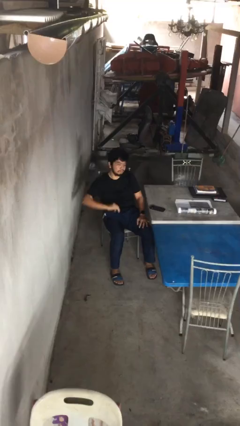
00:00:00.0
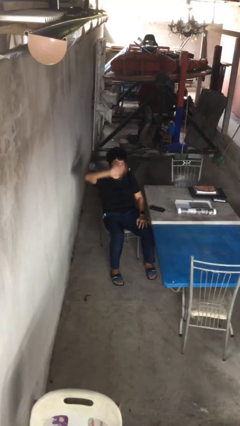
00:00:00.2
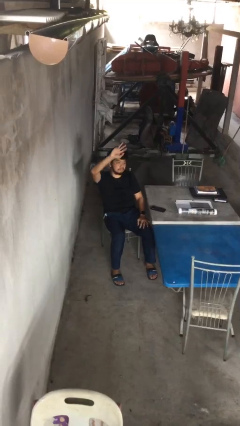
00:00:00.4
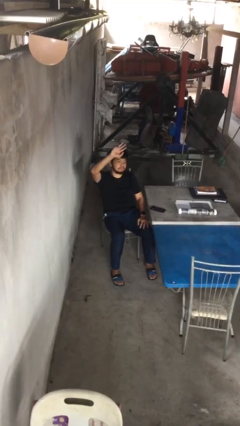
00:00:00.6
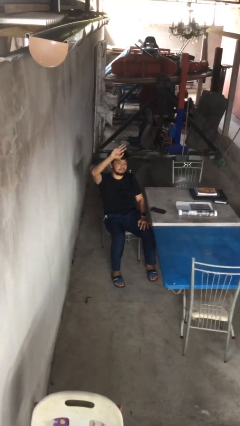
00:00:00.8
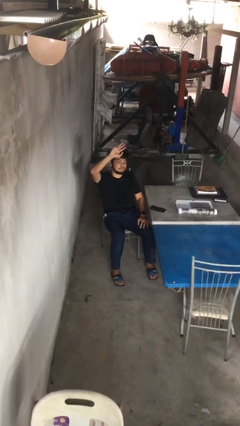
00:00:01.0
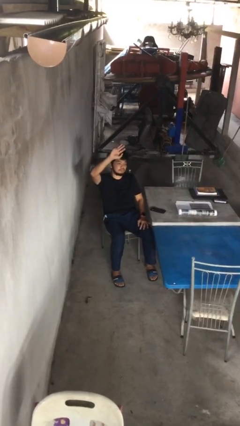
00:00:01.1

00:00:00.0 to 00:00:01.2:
person gestures swipe up

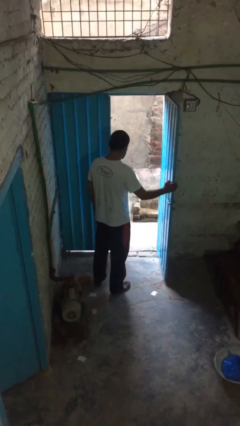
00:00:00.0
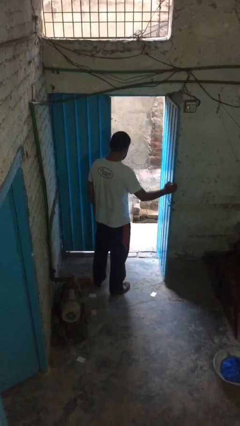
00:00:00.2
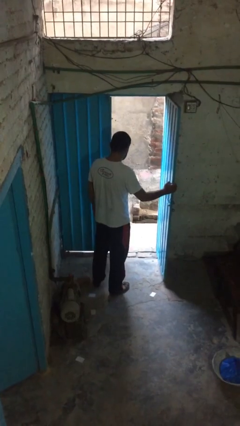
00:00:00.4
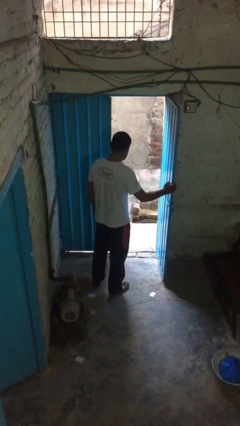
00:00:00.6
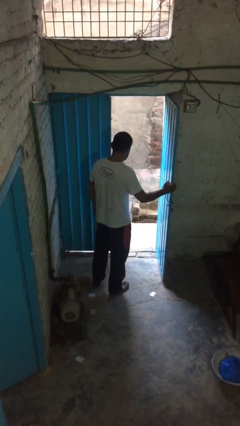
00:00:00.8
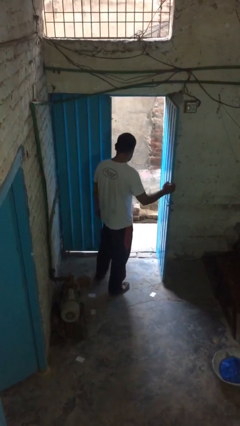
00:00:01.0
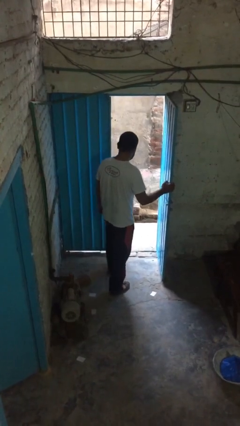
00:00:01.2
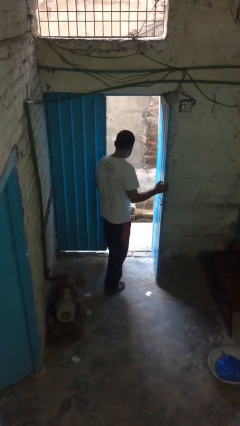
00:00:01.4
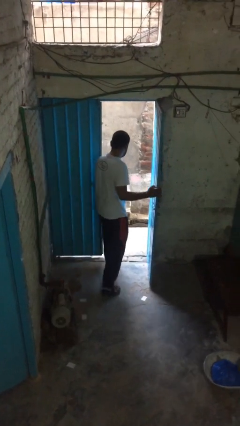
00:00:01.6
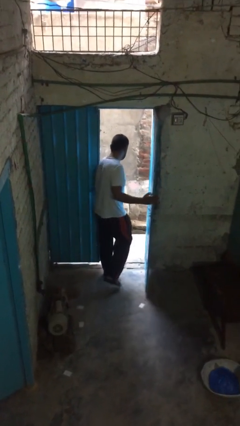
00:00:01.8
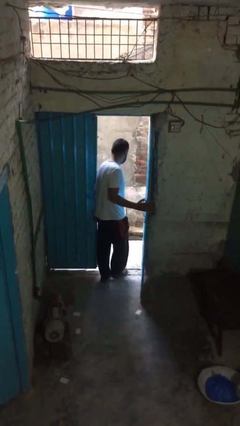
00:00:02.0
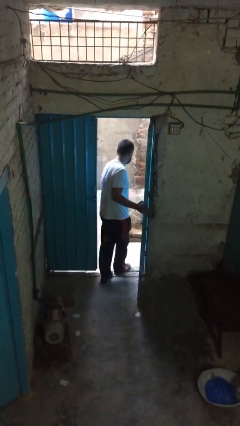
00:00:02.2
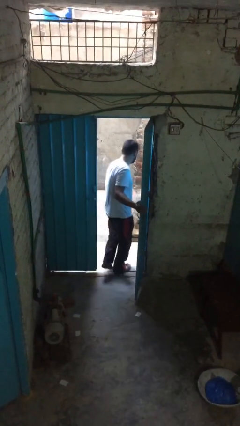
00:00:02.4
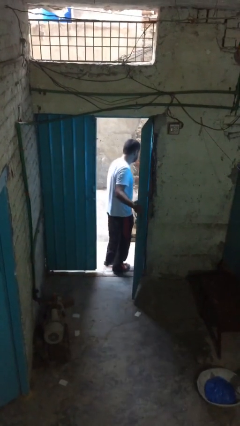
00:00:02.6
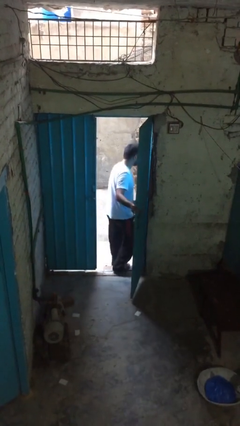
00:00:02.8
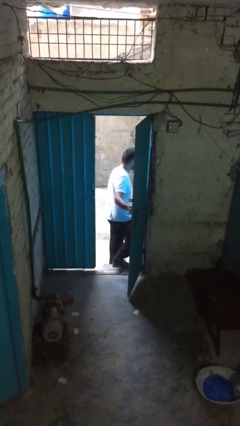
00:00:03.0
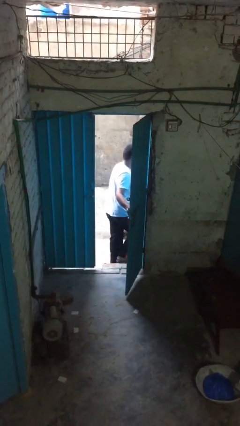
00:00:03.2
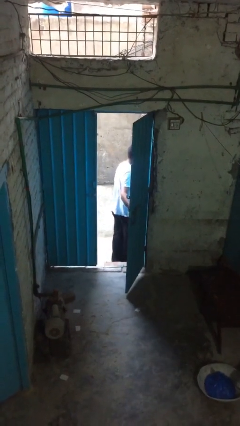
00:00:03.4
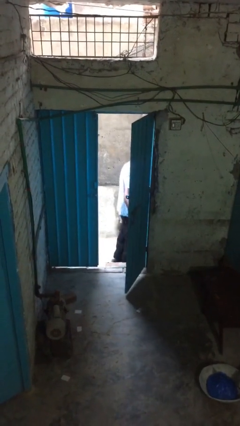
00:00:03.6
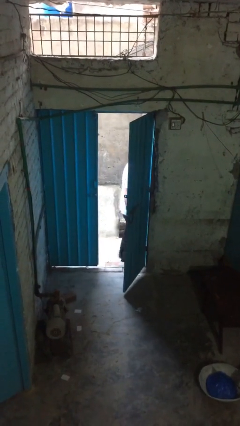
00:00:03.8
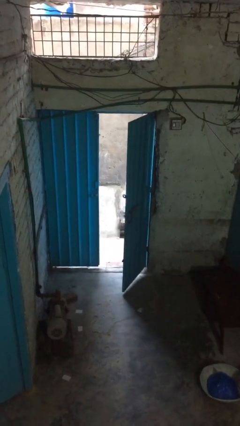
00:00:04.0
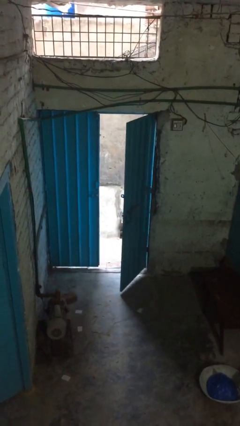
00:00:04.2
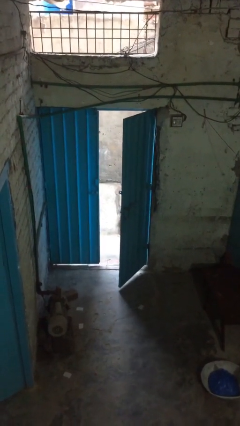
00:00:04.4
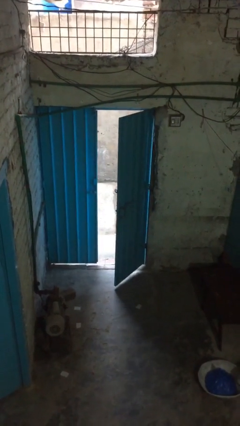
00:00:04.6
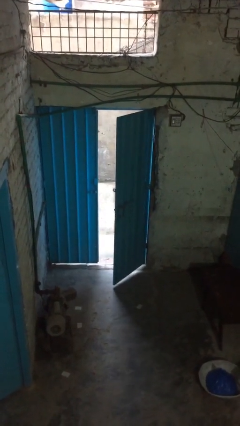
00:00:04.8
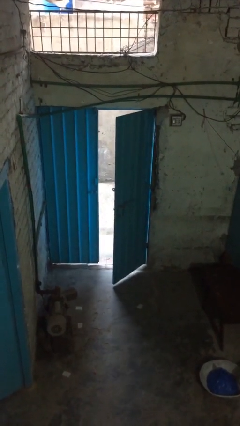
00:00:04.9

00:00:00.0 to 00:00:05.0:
person exits scene through structure

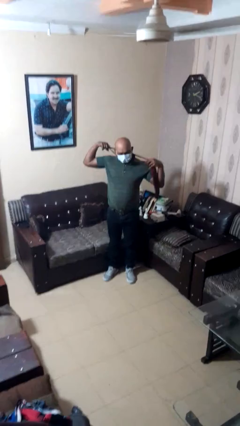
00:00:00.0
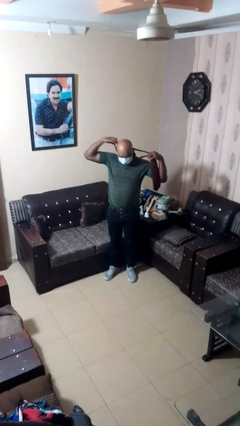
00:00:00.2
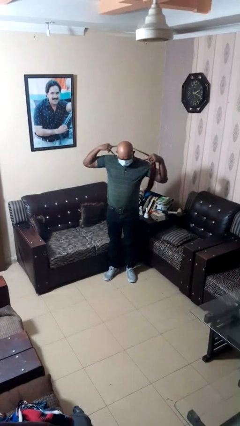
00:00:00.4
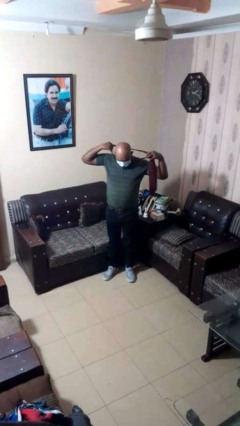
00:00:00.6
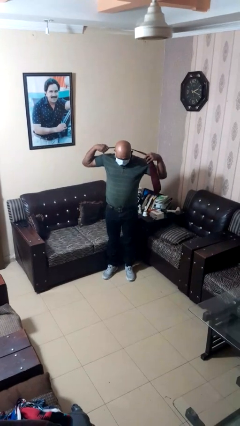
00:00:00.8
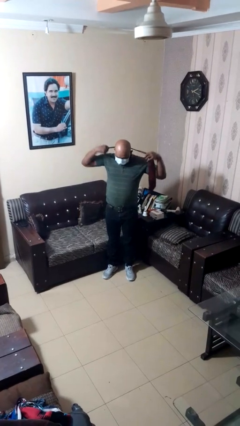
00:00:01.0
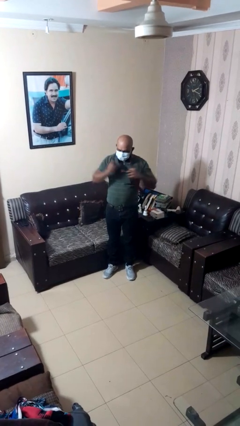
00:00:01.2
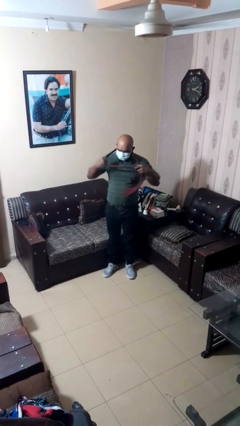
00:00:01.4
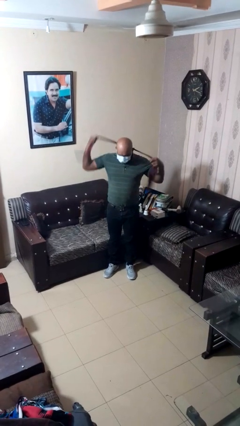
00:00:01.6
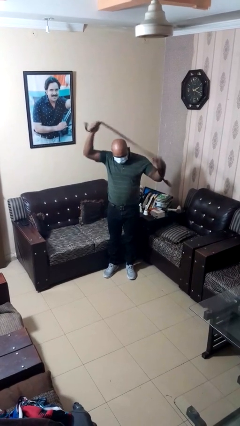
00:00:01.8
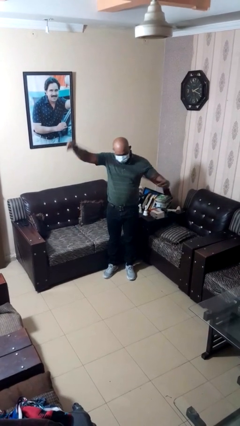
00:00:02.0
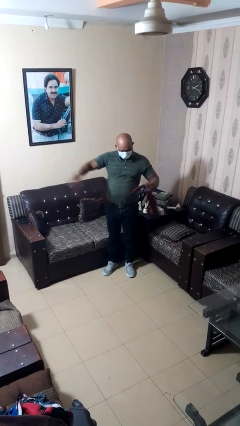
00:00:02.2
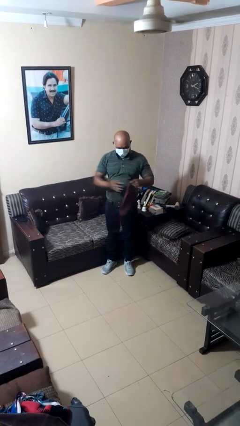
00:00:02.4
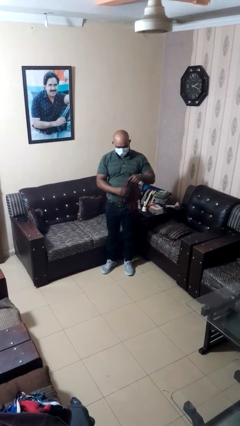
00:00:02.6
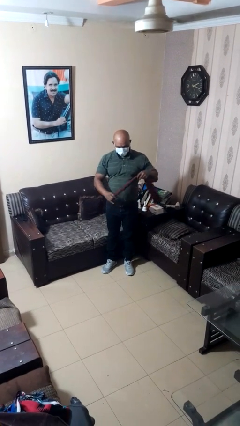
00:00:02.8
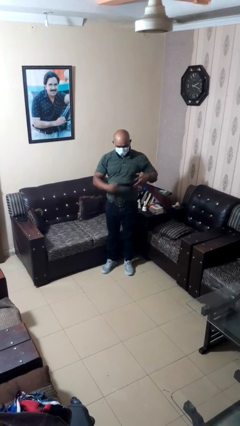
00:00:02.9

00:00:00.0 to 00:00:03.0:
person takes off necktie

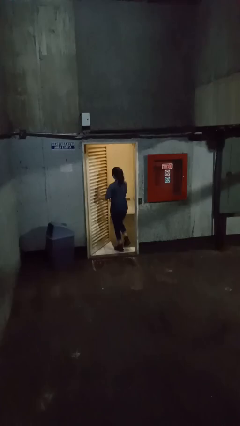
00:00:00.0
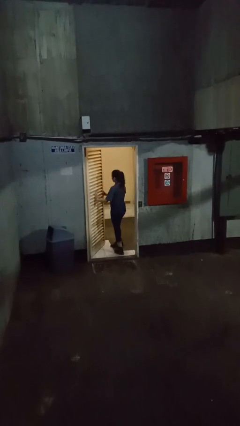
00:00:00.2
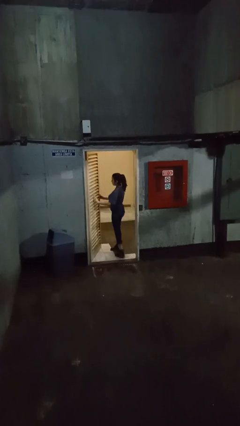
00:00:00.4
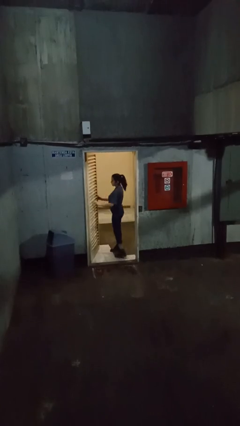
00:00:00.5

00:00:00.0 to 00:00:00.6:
person opens facility door

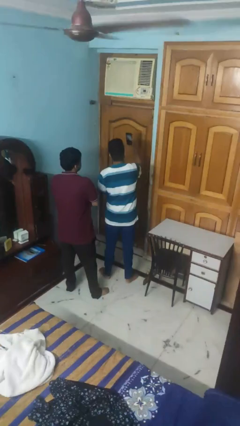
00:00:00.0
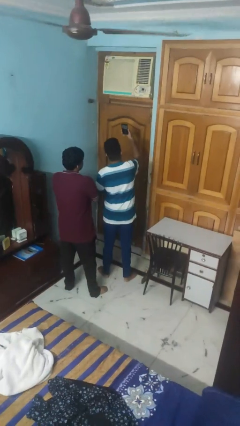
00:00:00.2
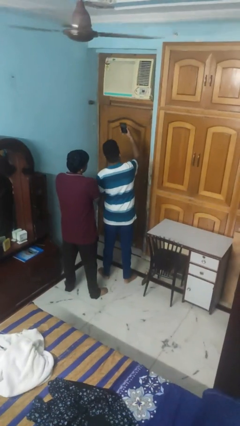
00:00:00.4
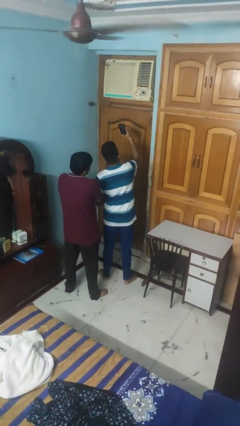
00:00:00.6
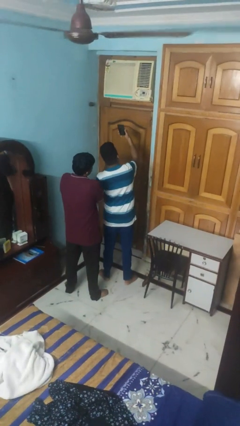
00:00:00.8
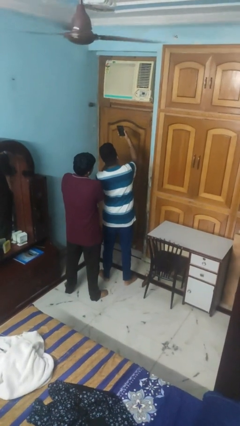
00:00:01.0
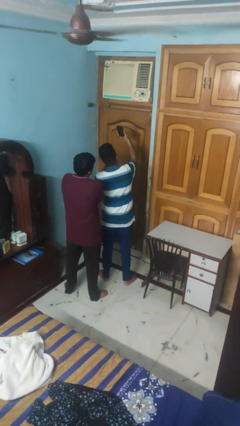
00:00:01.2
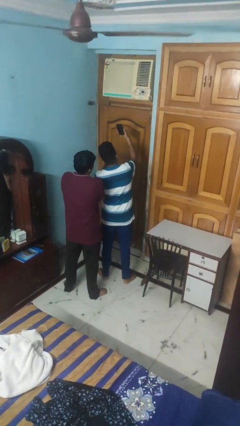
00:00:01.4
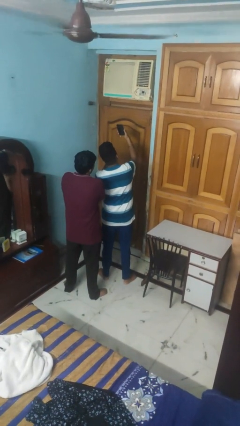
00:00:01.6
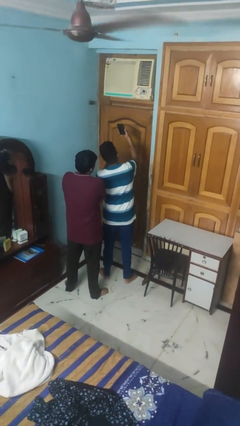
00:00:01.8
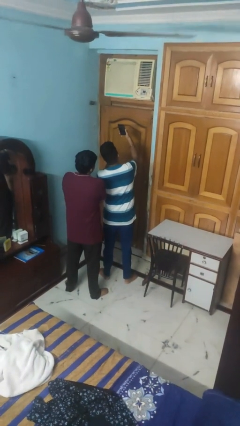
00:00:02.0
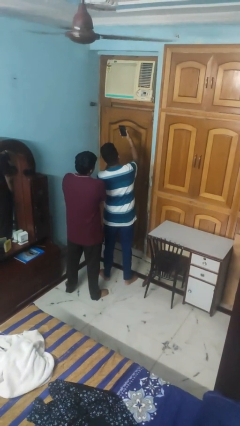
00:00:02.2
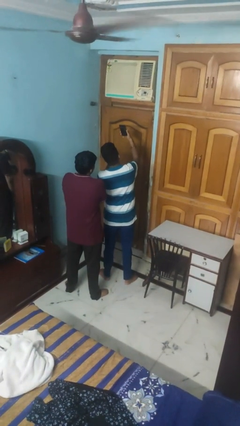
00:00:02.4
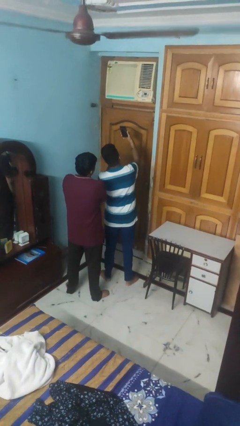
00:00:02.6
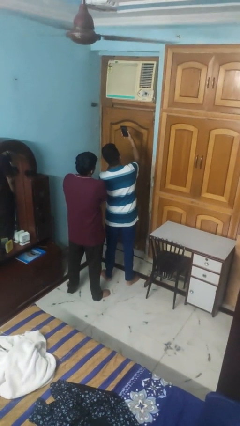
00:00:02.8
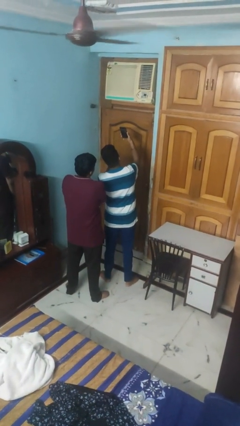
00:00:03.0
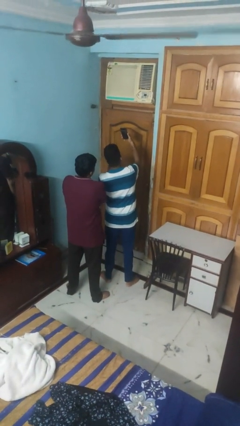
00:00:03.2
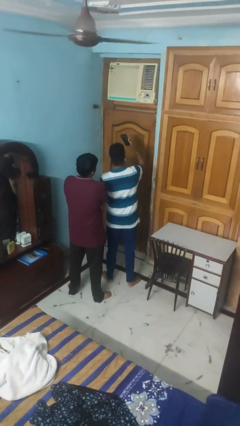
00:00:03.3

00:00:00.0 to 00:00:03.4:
person takes selfie with person

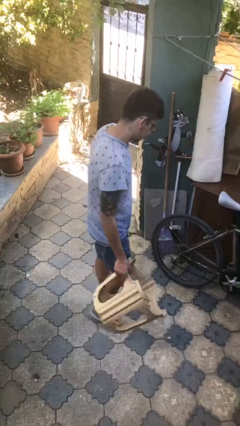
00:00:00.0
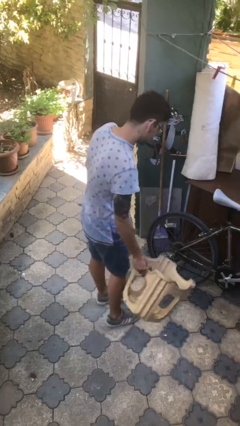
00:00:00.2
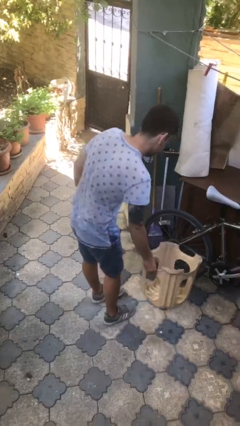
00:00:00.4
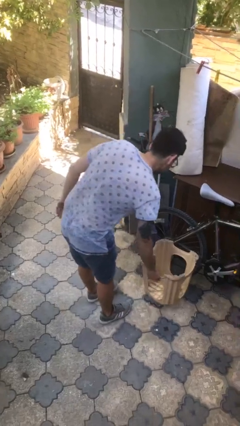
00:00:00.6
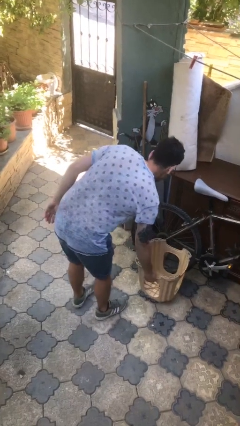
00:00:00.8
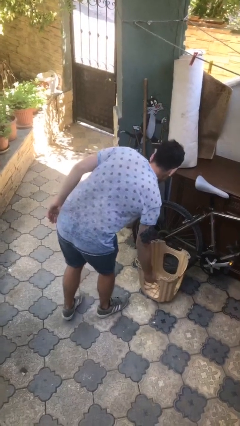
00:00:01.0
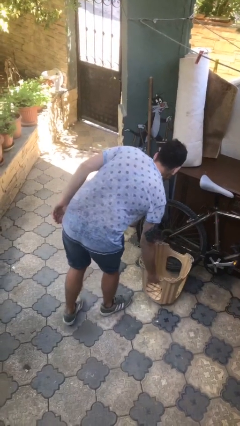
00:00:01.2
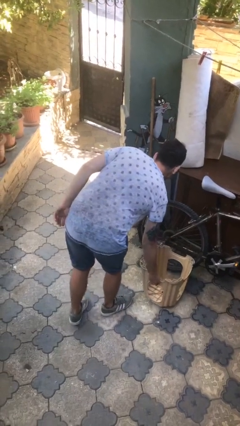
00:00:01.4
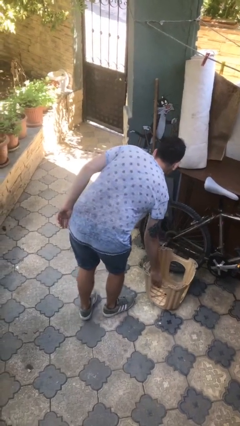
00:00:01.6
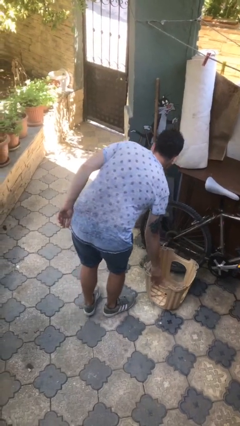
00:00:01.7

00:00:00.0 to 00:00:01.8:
person puts down object on floor

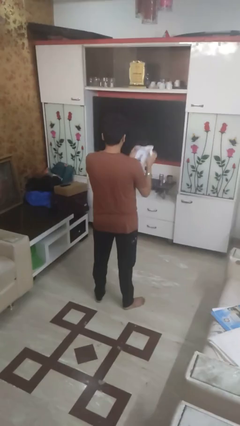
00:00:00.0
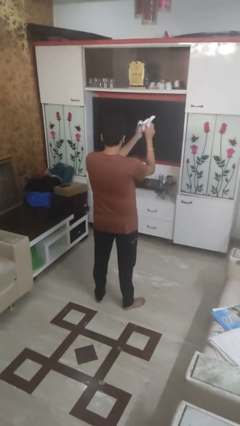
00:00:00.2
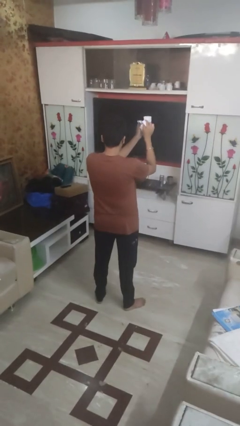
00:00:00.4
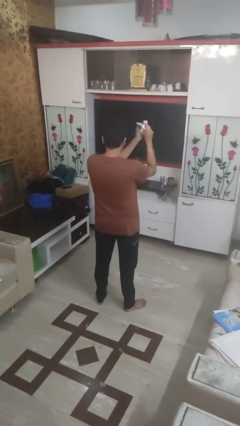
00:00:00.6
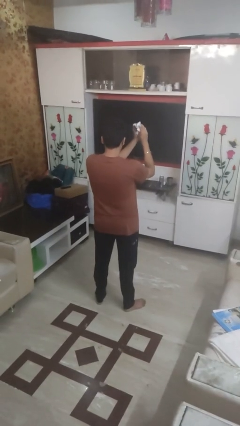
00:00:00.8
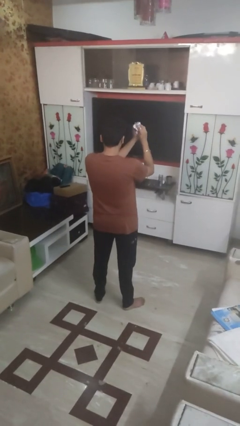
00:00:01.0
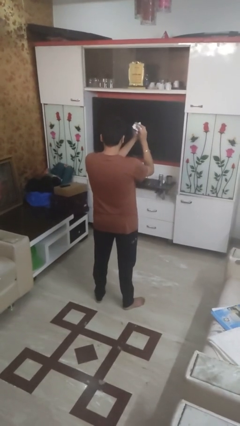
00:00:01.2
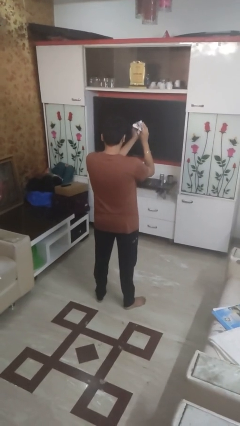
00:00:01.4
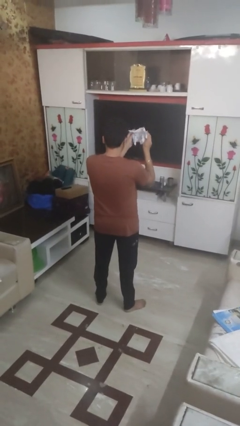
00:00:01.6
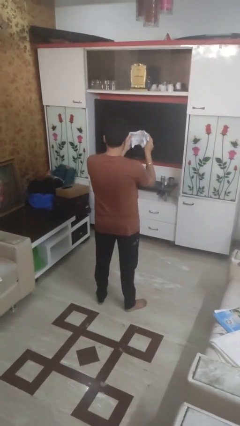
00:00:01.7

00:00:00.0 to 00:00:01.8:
person crumples paper
